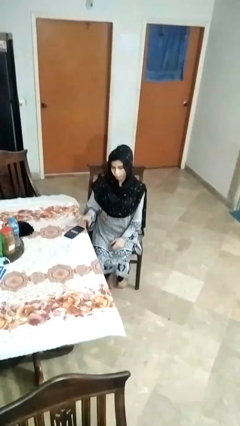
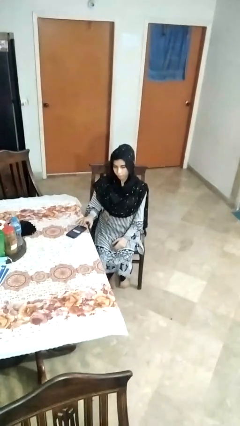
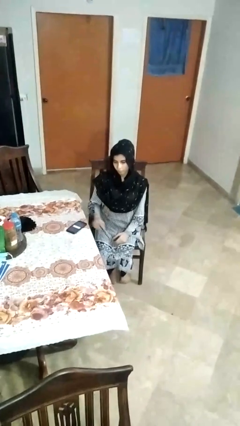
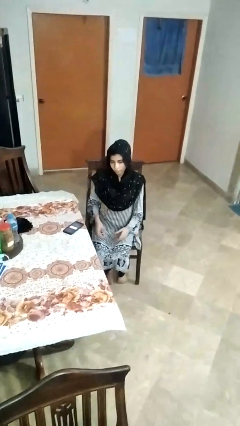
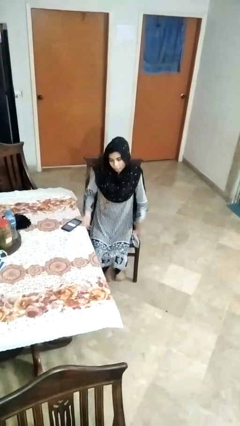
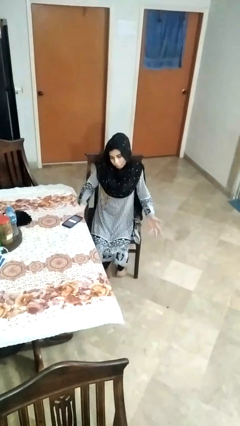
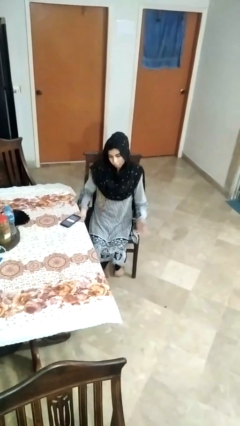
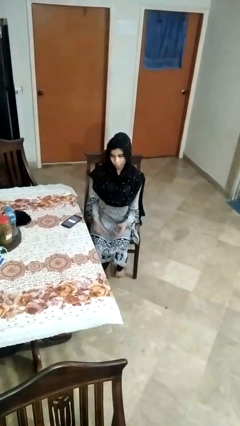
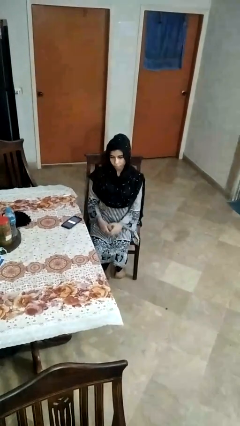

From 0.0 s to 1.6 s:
person shrugs

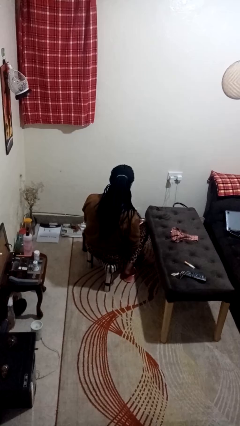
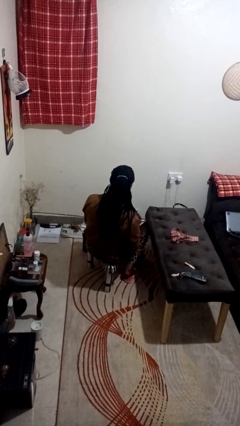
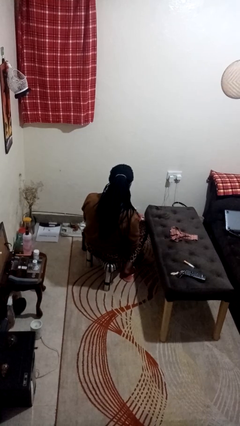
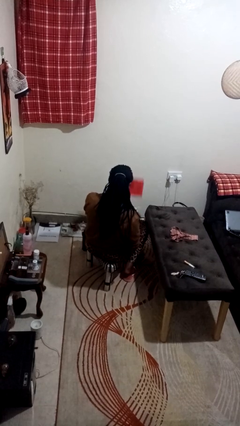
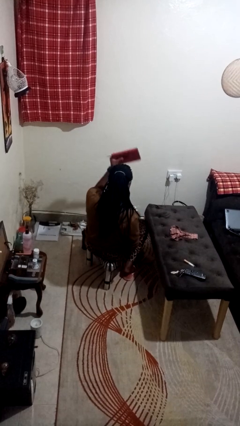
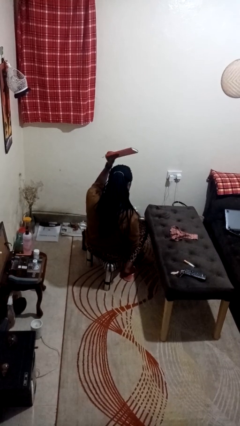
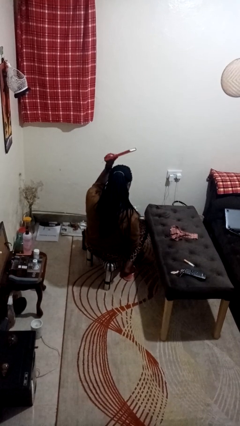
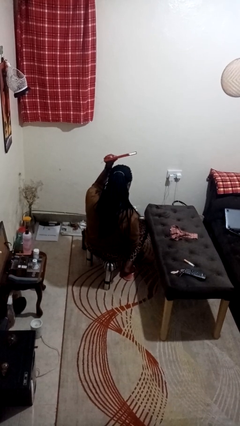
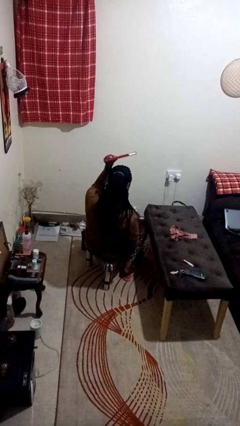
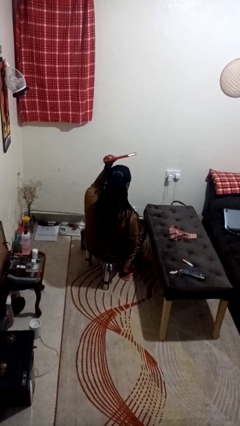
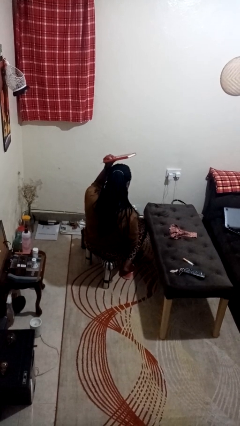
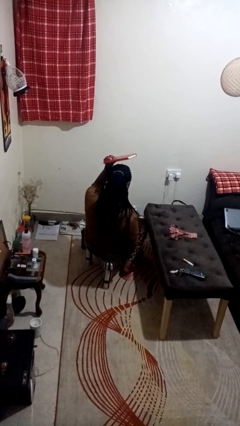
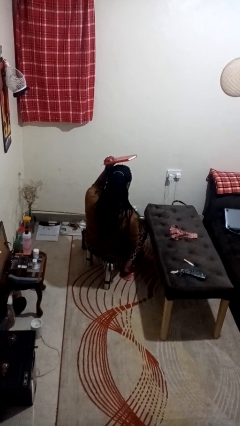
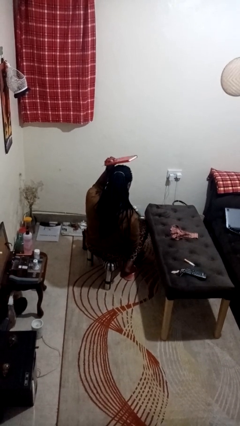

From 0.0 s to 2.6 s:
person holds object above head

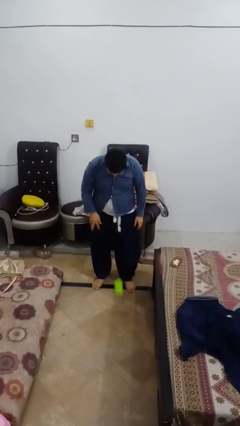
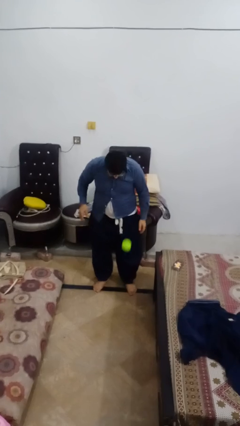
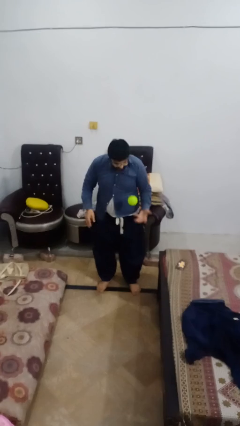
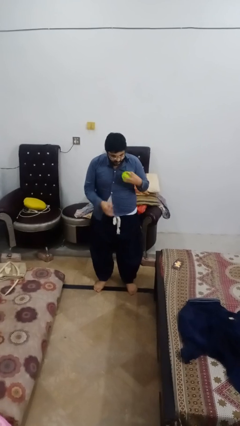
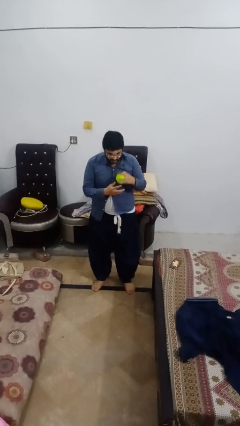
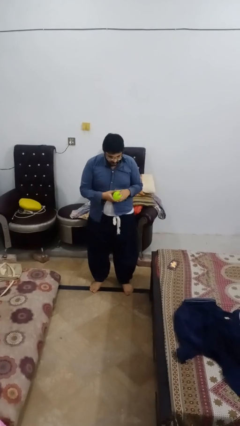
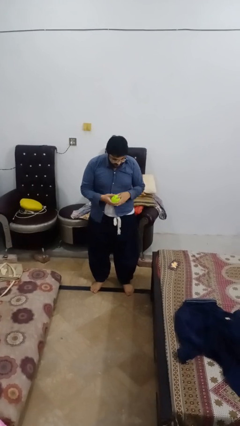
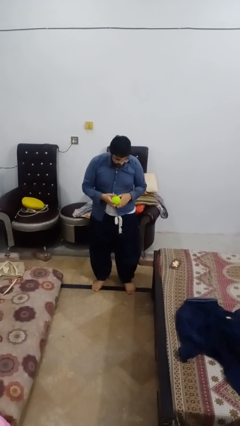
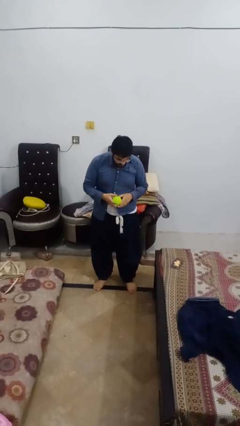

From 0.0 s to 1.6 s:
person bounces ball on floor

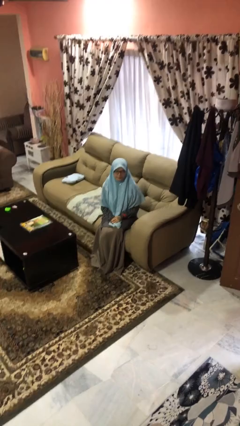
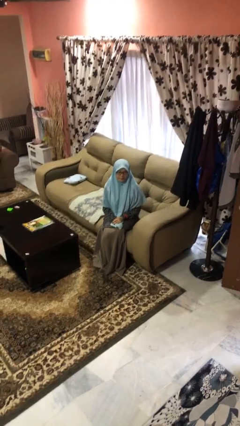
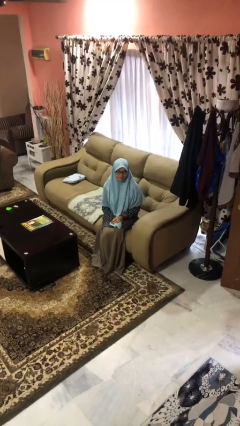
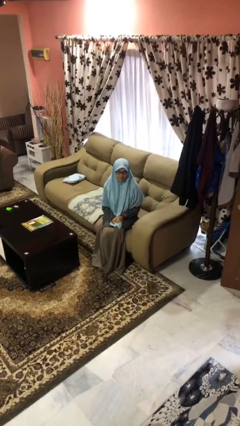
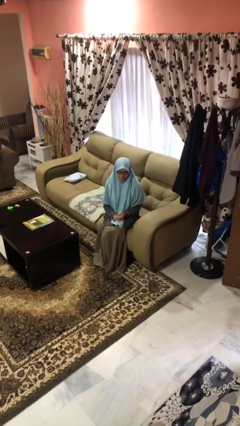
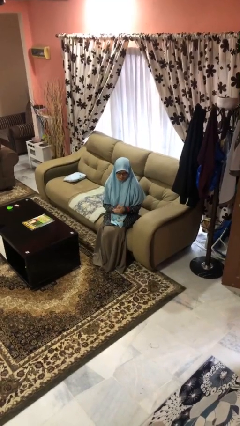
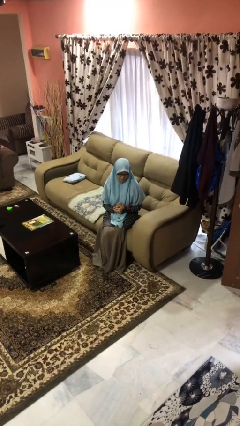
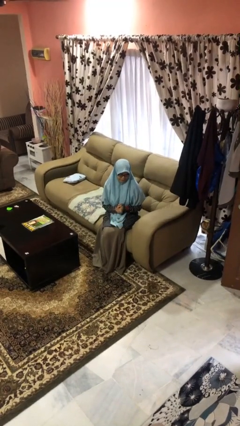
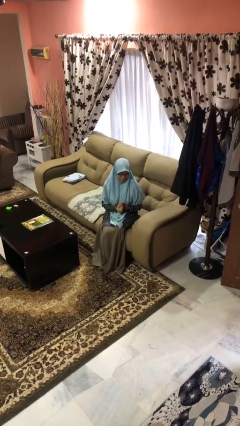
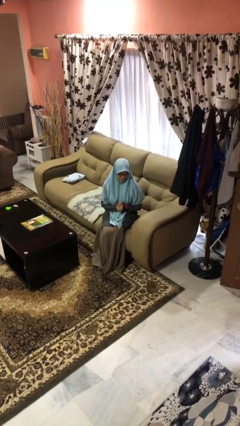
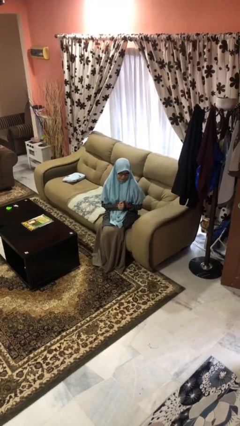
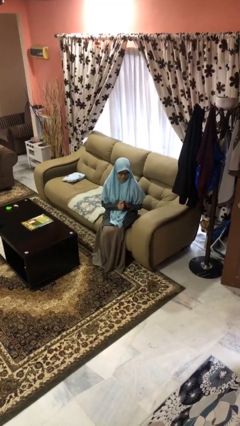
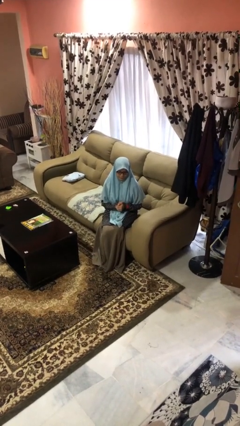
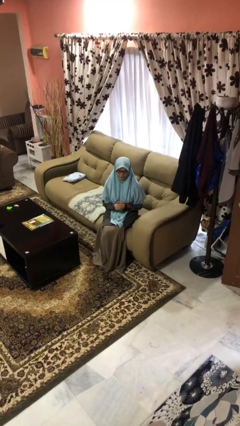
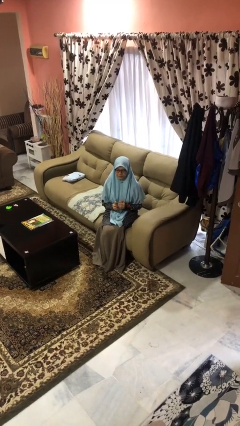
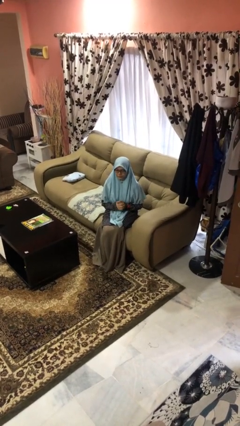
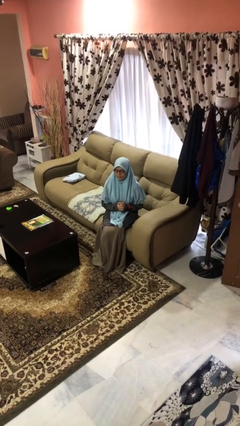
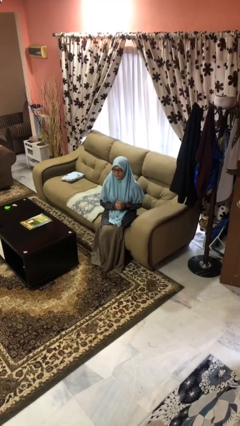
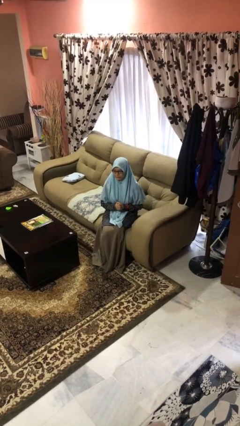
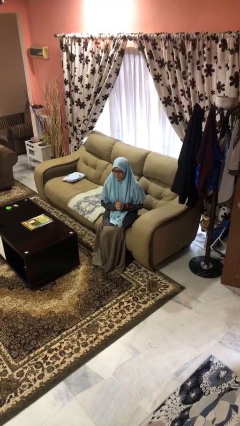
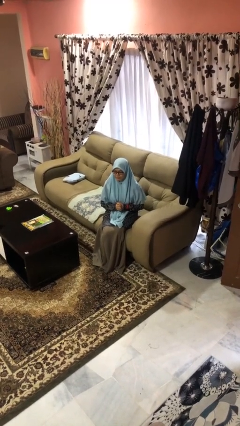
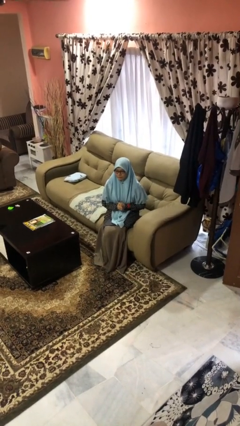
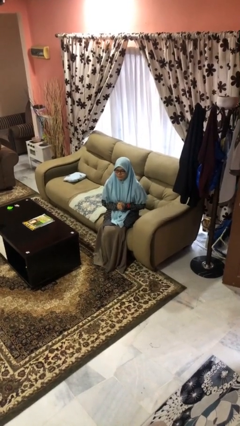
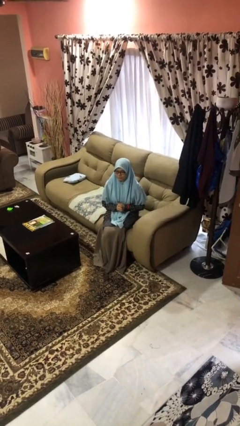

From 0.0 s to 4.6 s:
person cracks knuckles

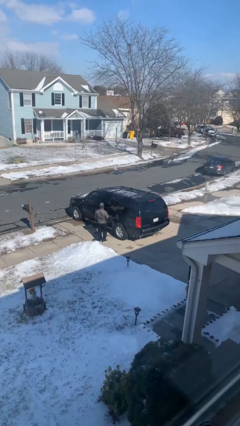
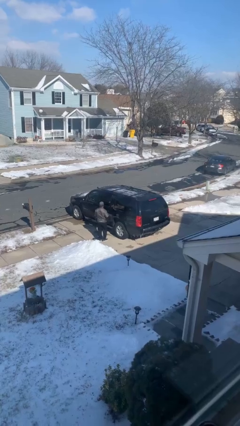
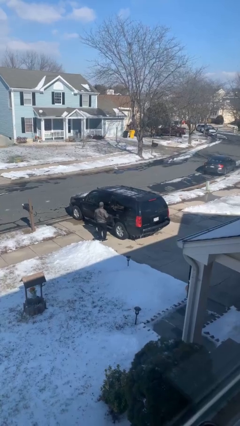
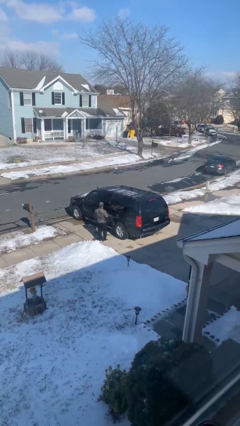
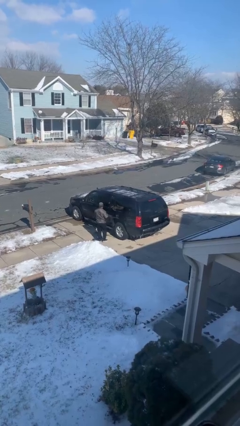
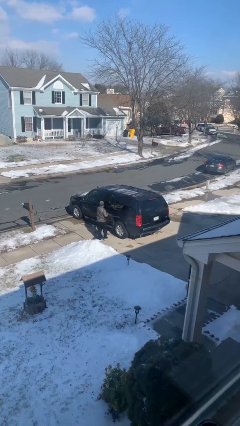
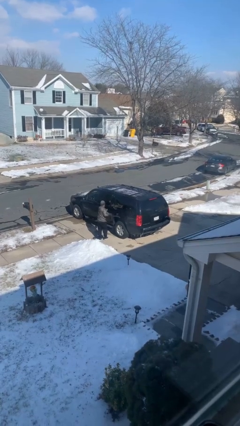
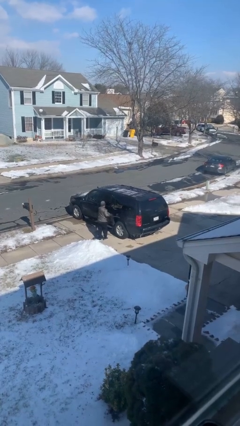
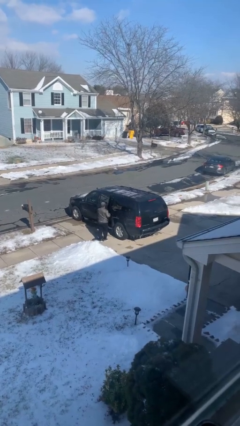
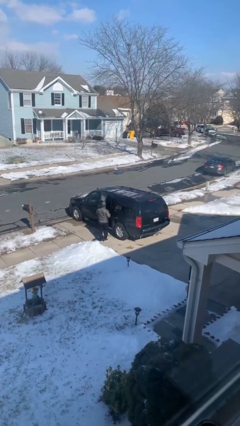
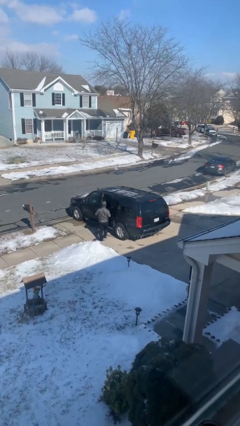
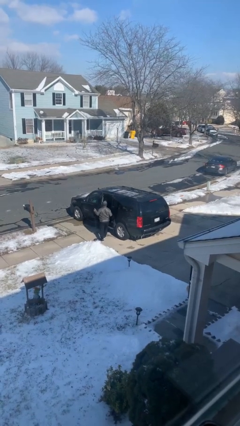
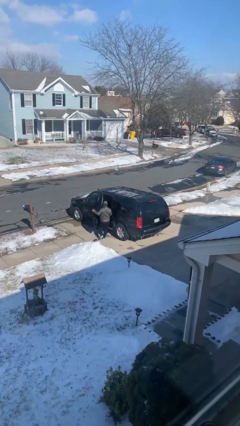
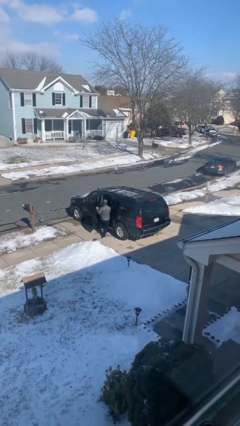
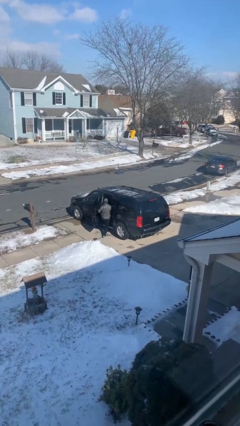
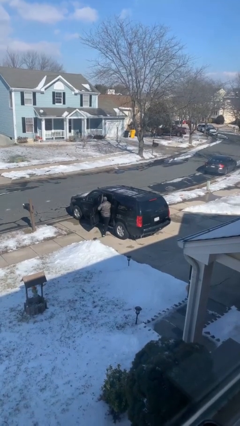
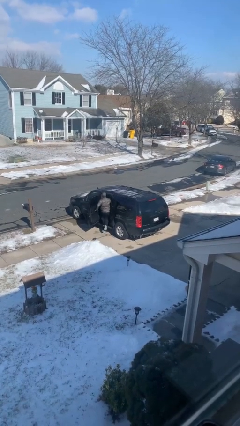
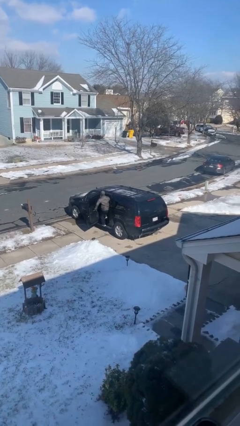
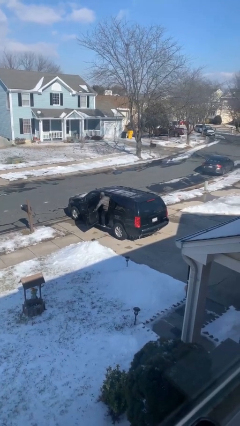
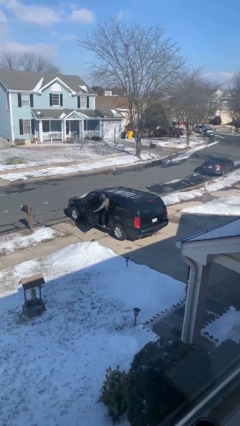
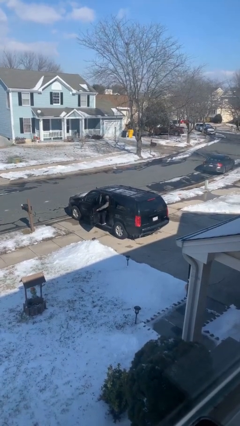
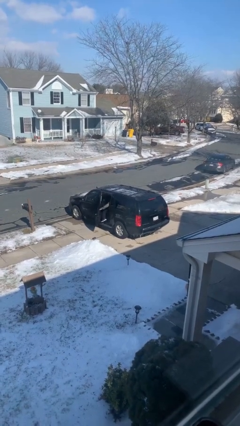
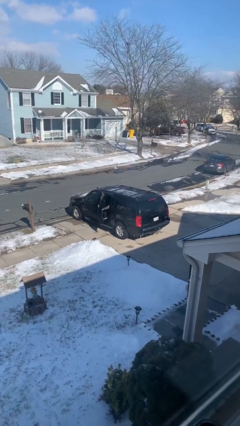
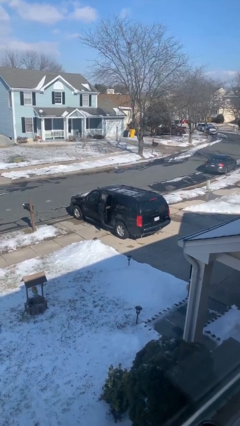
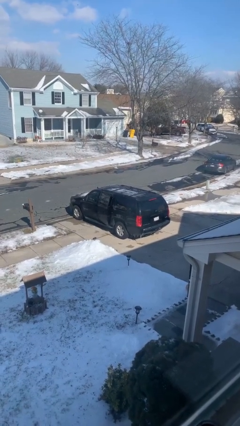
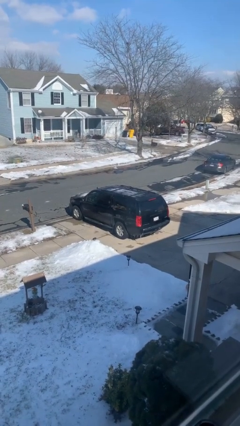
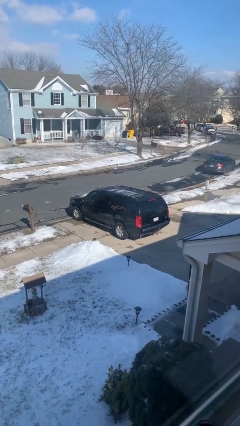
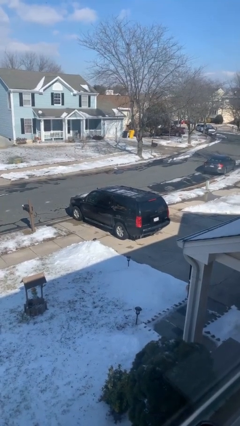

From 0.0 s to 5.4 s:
car picks up person

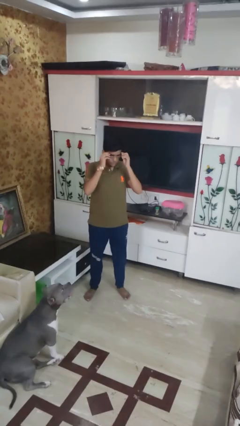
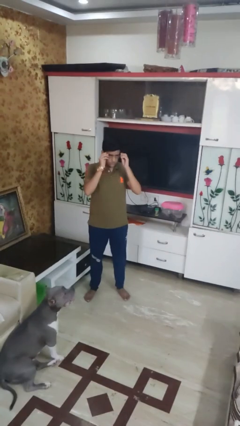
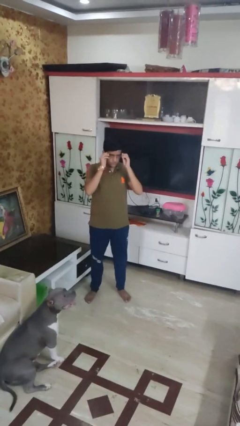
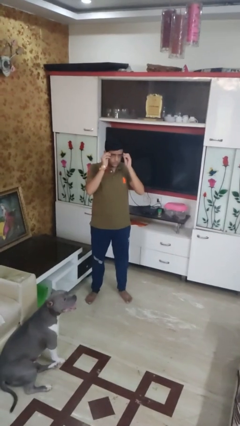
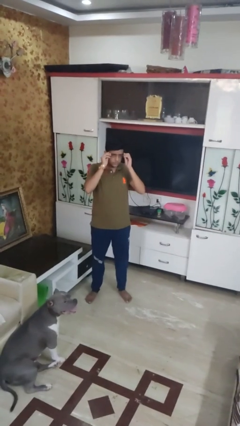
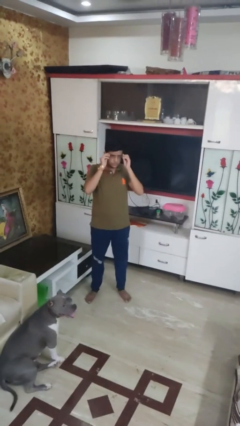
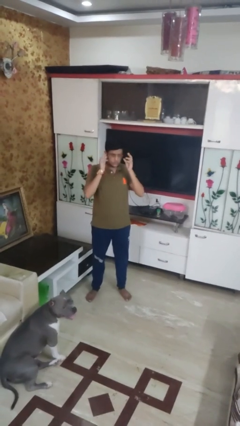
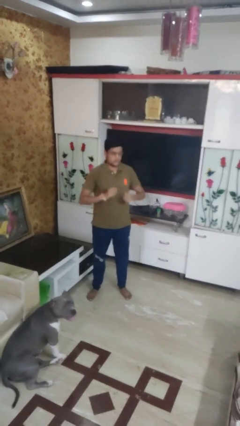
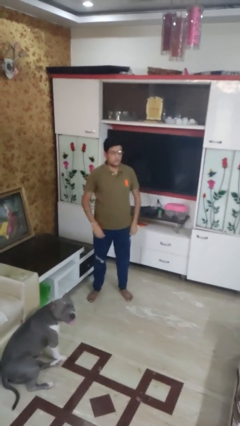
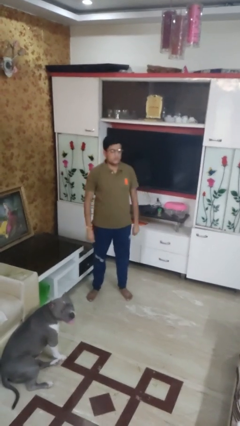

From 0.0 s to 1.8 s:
person puts on glasses
